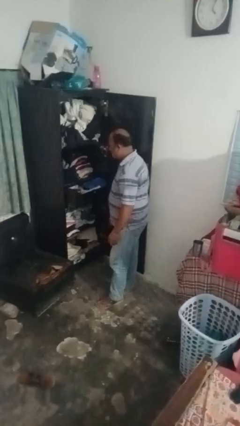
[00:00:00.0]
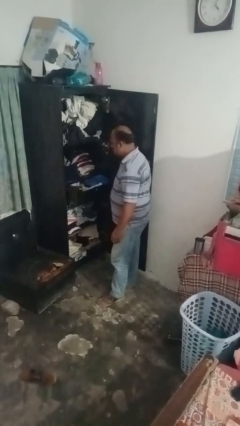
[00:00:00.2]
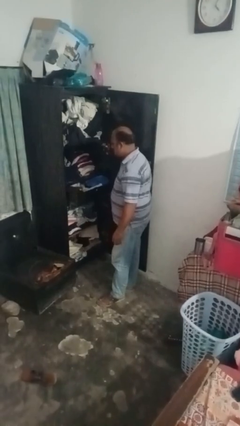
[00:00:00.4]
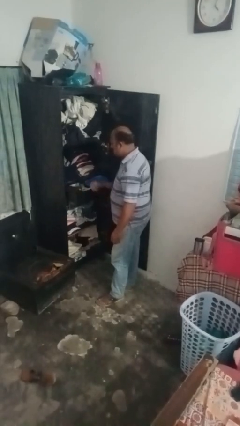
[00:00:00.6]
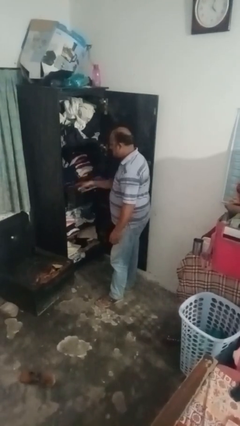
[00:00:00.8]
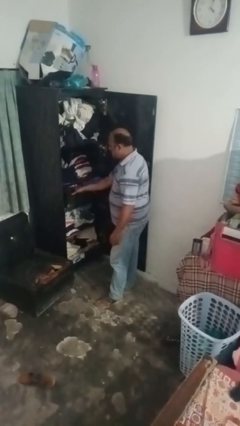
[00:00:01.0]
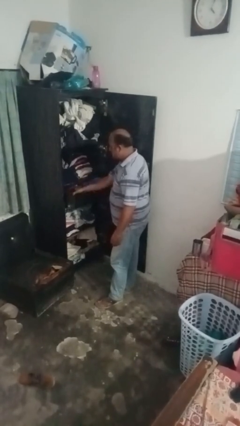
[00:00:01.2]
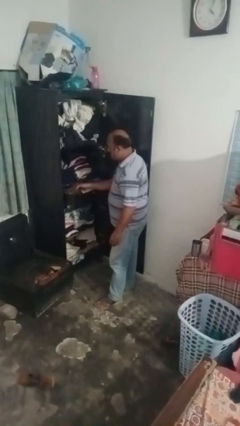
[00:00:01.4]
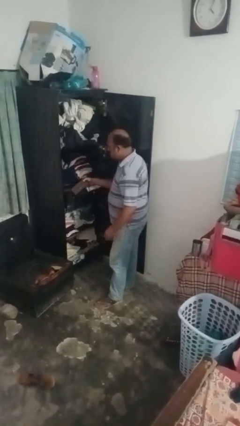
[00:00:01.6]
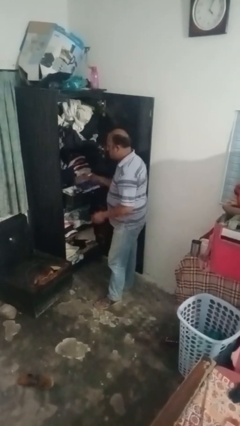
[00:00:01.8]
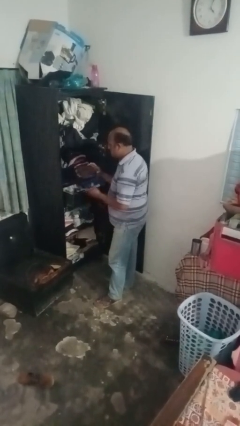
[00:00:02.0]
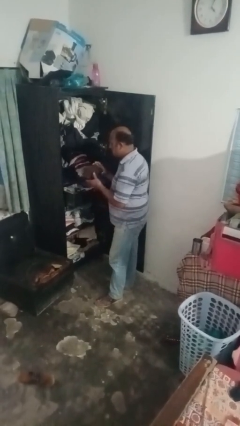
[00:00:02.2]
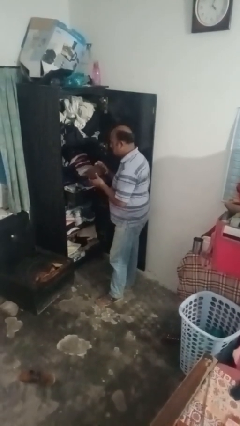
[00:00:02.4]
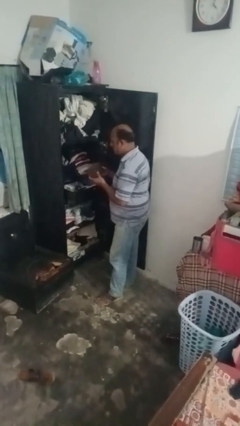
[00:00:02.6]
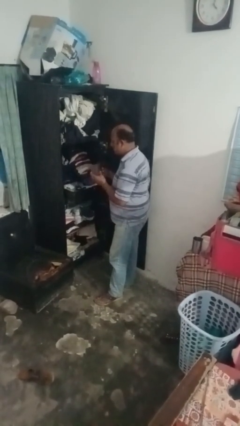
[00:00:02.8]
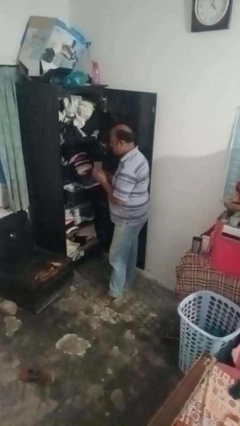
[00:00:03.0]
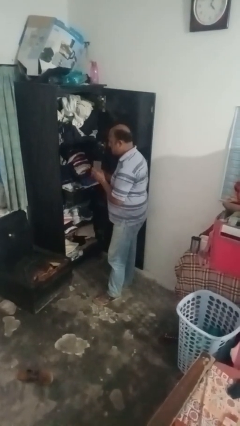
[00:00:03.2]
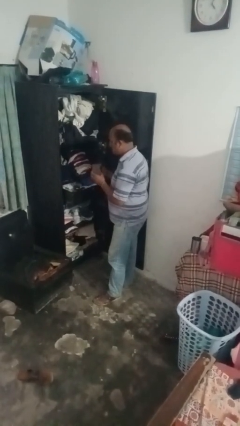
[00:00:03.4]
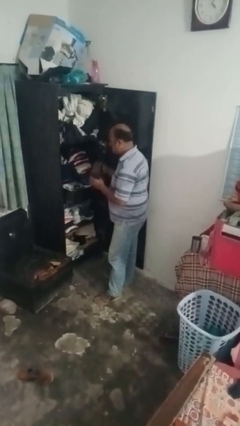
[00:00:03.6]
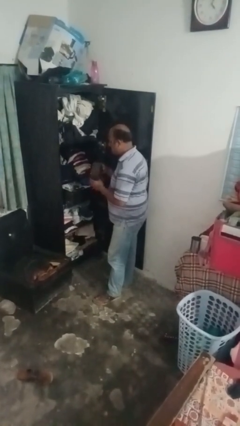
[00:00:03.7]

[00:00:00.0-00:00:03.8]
person puts clothes into dresser

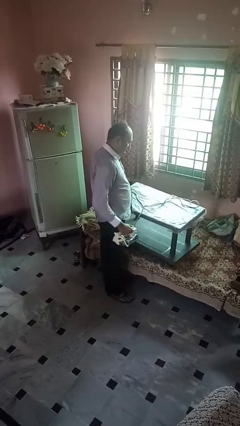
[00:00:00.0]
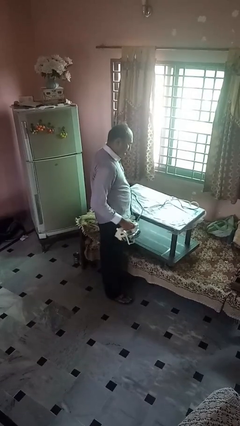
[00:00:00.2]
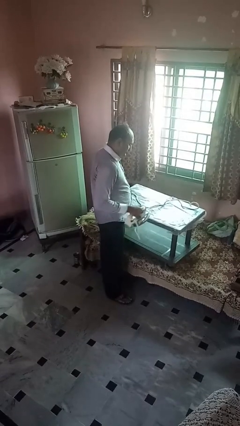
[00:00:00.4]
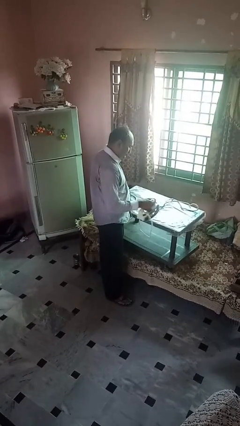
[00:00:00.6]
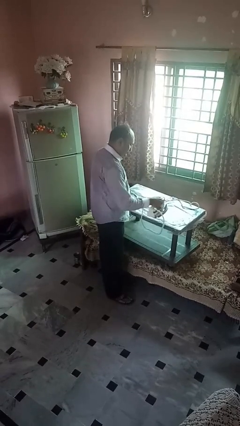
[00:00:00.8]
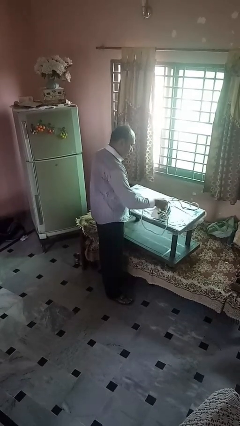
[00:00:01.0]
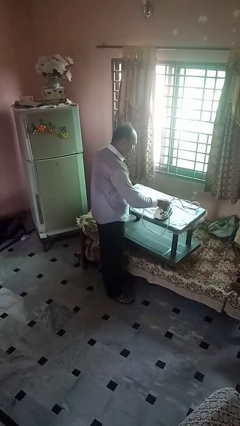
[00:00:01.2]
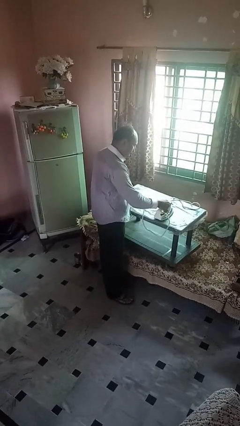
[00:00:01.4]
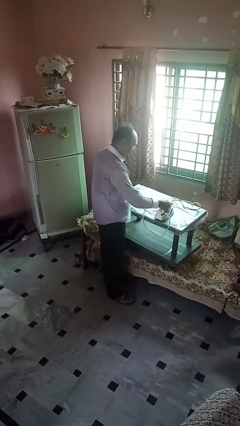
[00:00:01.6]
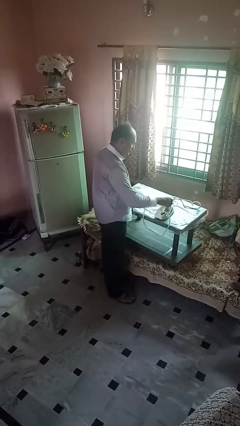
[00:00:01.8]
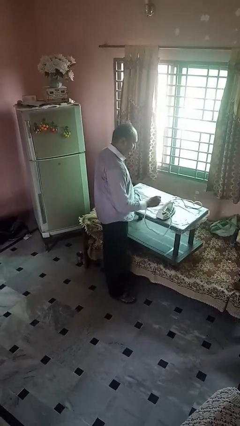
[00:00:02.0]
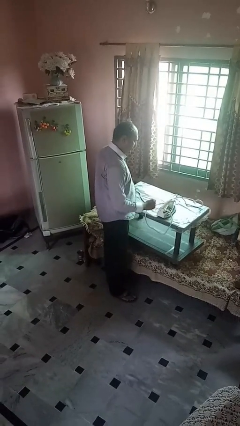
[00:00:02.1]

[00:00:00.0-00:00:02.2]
person puts down object on countertop

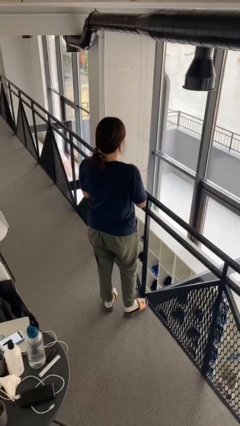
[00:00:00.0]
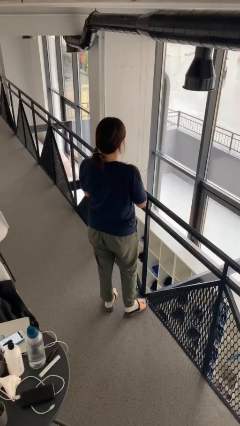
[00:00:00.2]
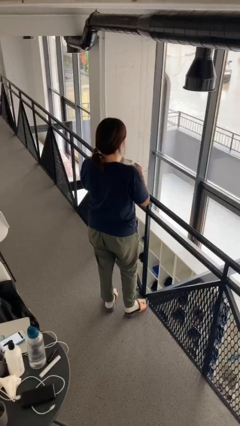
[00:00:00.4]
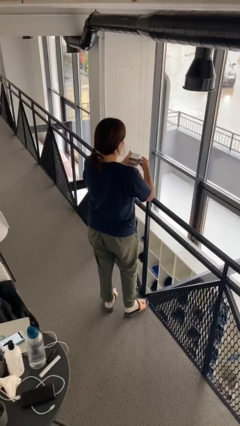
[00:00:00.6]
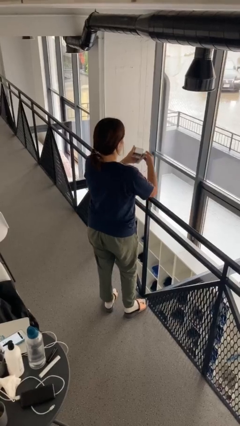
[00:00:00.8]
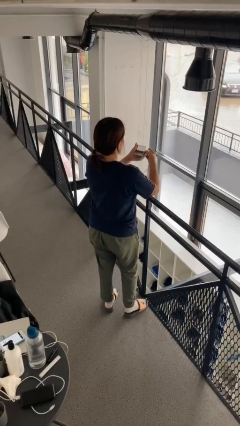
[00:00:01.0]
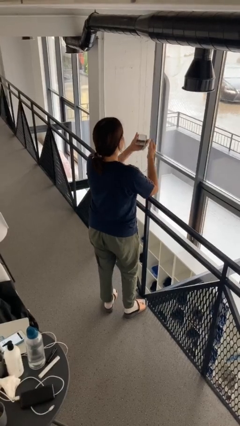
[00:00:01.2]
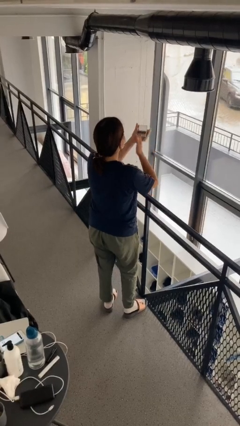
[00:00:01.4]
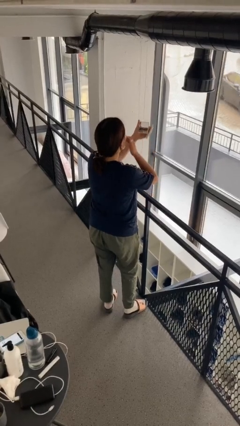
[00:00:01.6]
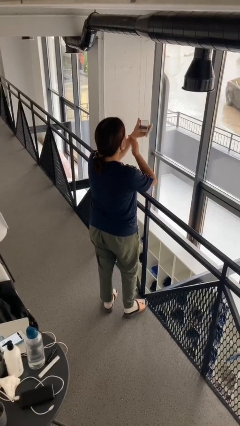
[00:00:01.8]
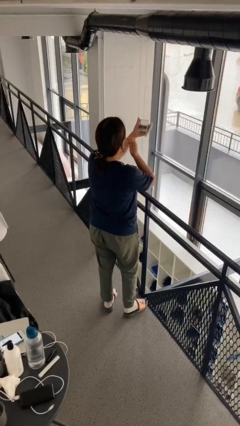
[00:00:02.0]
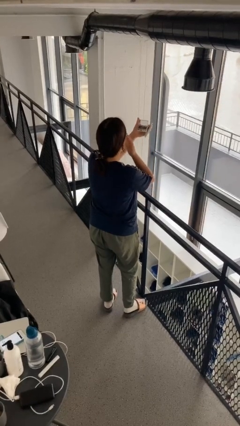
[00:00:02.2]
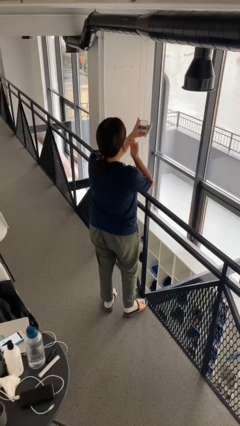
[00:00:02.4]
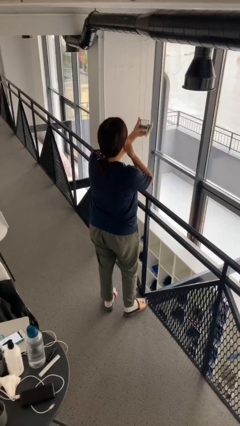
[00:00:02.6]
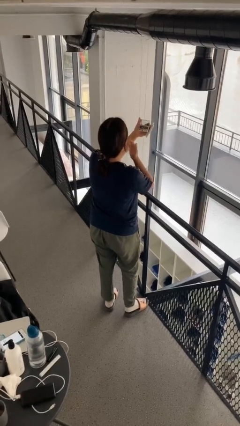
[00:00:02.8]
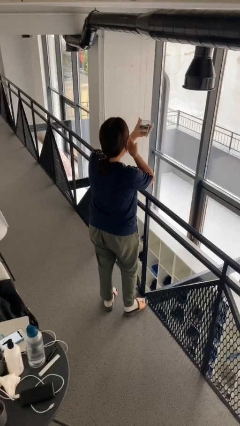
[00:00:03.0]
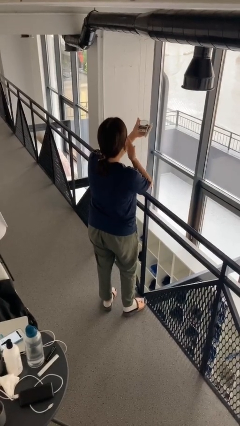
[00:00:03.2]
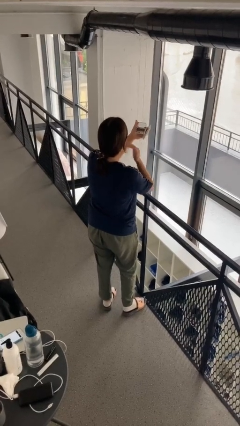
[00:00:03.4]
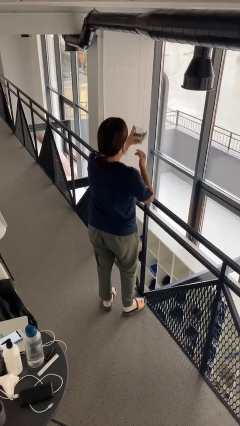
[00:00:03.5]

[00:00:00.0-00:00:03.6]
person applies foundation makeup

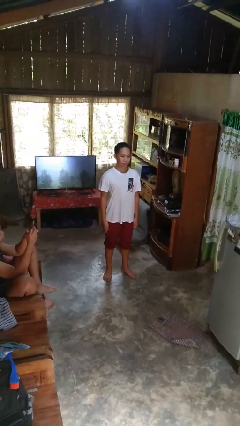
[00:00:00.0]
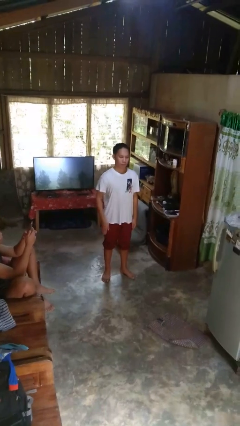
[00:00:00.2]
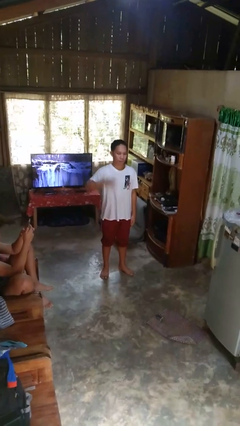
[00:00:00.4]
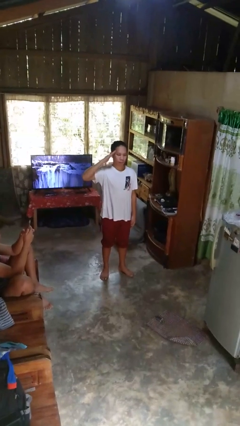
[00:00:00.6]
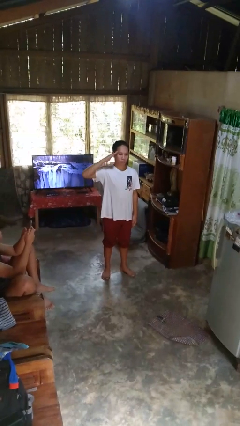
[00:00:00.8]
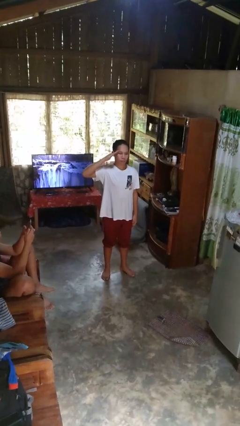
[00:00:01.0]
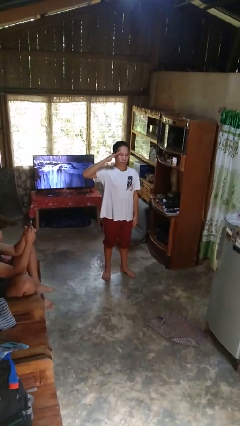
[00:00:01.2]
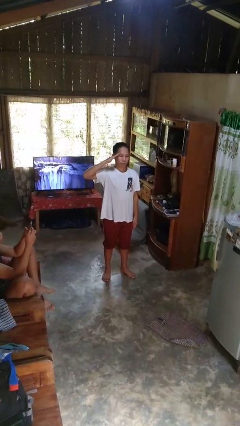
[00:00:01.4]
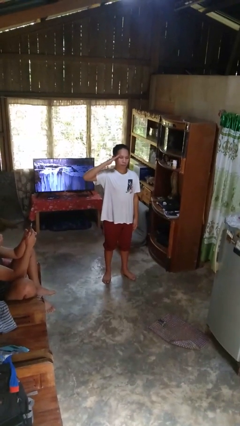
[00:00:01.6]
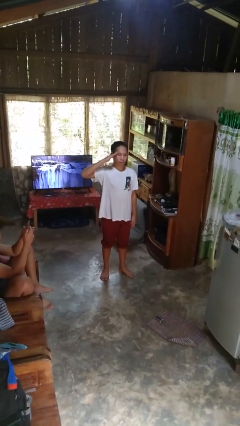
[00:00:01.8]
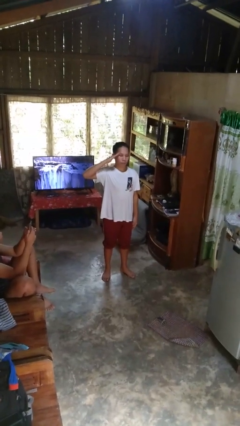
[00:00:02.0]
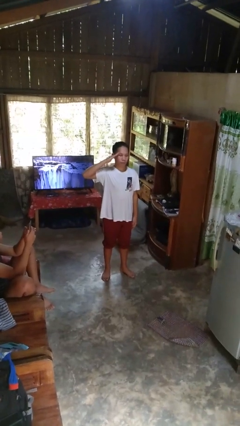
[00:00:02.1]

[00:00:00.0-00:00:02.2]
person salutes

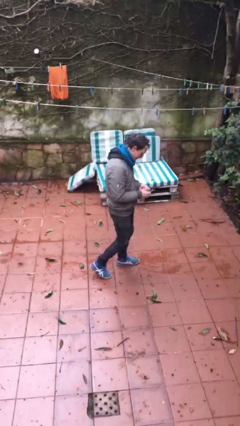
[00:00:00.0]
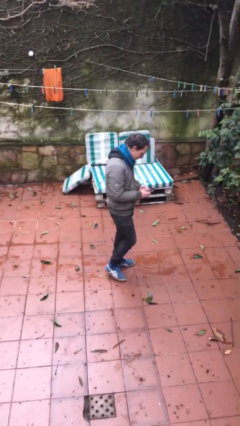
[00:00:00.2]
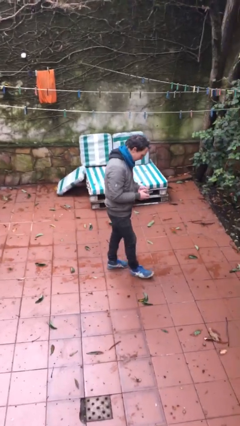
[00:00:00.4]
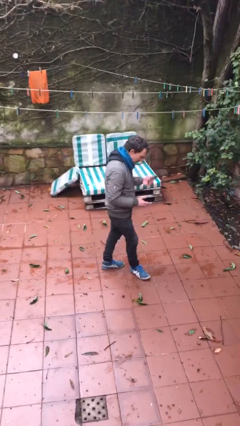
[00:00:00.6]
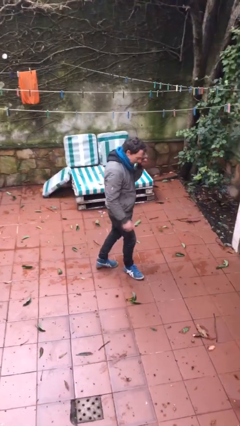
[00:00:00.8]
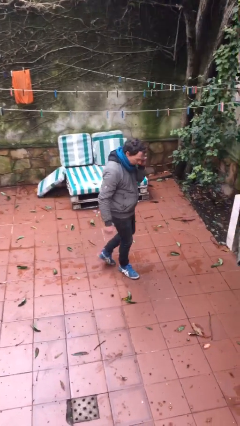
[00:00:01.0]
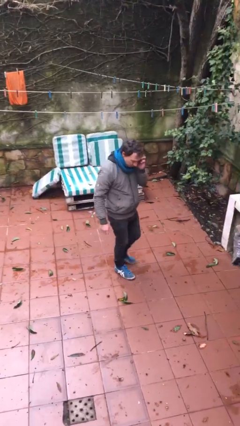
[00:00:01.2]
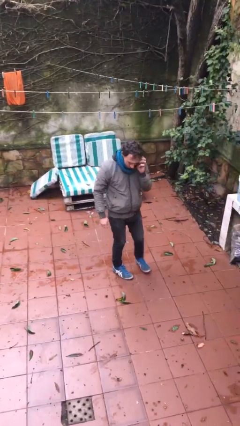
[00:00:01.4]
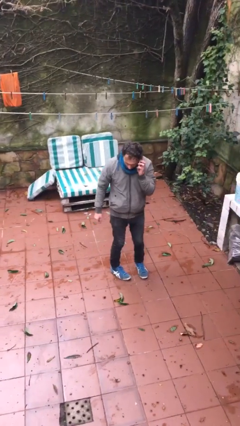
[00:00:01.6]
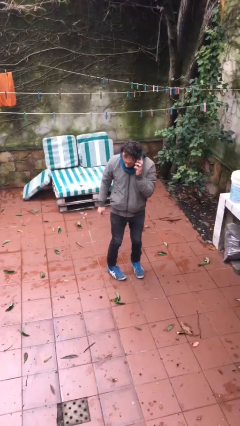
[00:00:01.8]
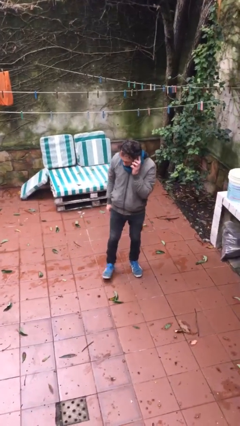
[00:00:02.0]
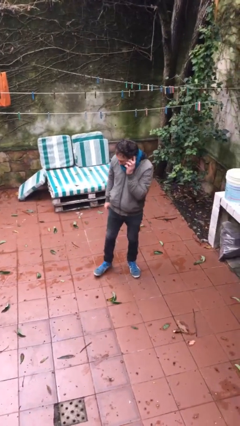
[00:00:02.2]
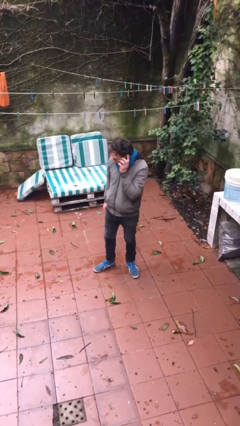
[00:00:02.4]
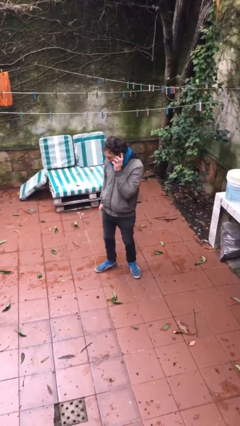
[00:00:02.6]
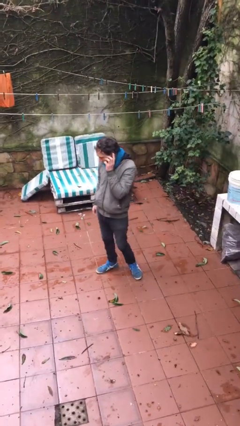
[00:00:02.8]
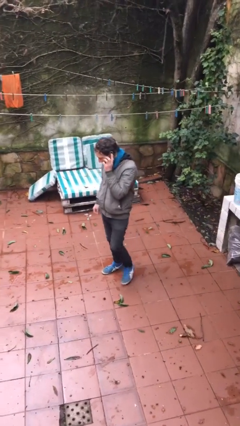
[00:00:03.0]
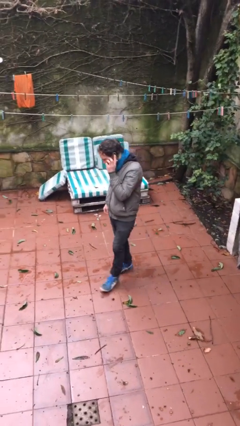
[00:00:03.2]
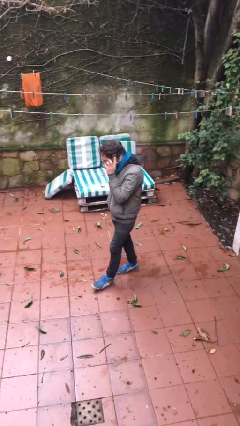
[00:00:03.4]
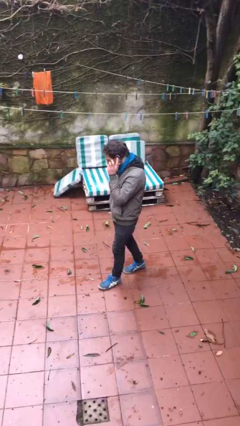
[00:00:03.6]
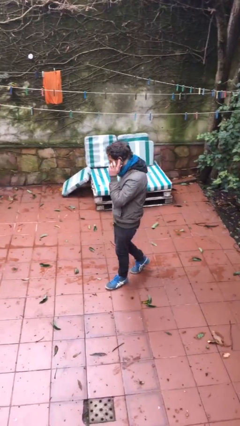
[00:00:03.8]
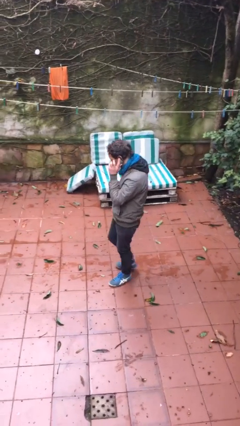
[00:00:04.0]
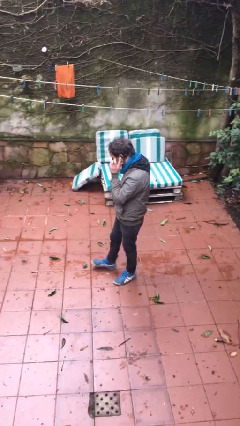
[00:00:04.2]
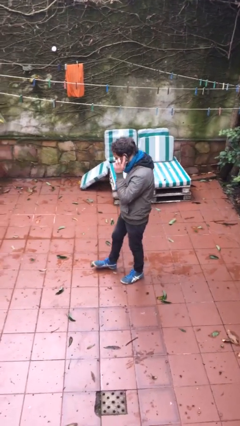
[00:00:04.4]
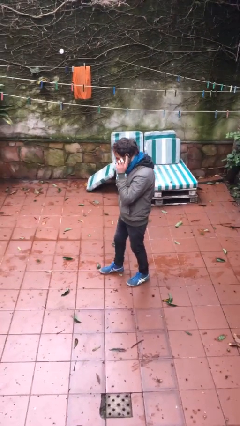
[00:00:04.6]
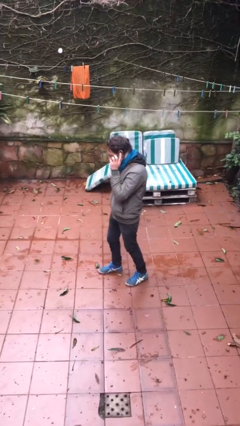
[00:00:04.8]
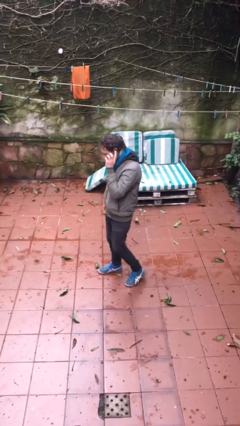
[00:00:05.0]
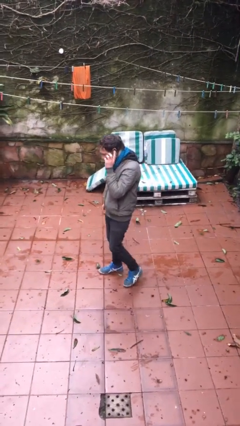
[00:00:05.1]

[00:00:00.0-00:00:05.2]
person talks on phone

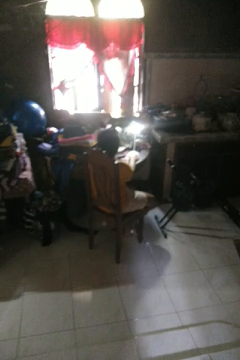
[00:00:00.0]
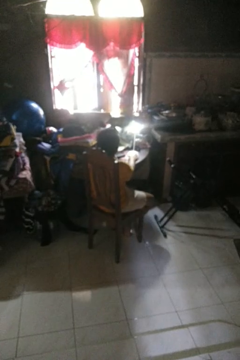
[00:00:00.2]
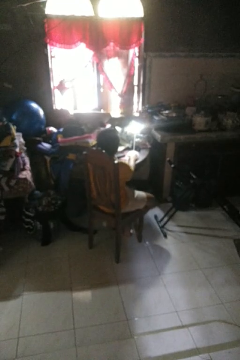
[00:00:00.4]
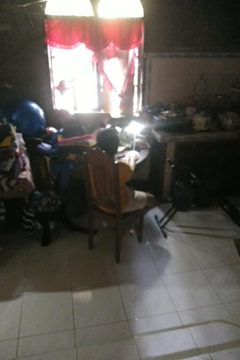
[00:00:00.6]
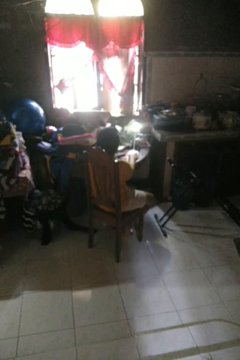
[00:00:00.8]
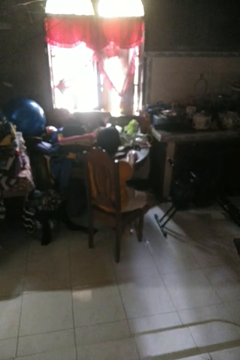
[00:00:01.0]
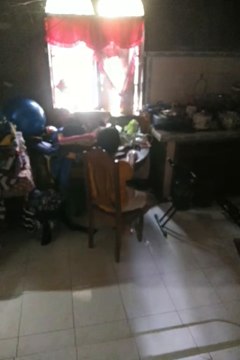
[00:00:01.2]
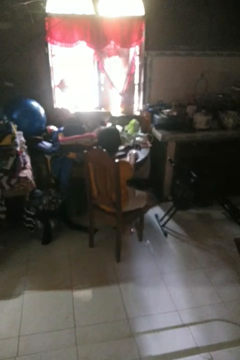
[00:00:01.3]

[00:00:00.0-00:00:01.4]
person turns off lamp
